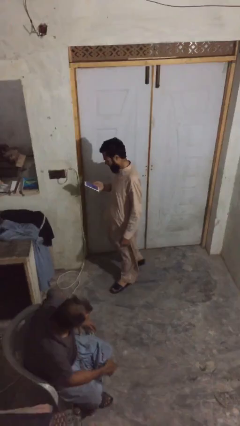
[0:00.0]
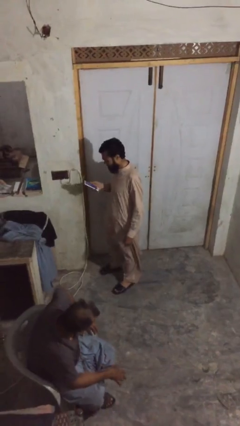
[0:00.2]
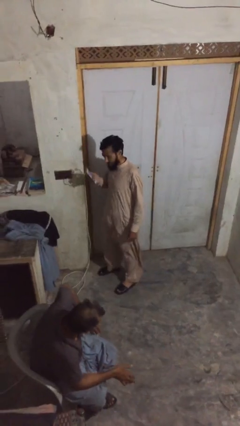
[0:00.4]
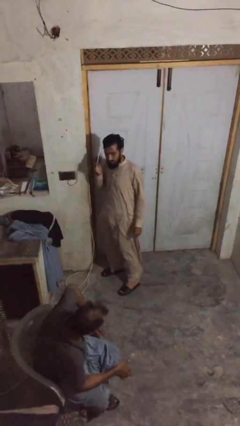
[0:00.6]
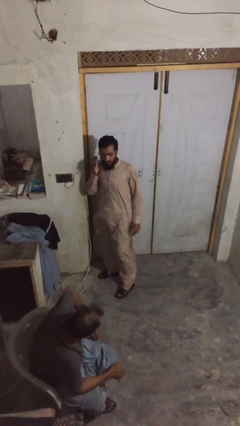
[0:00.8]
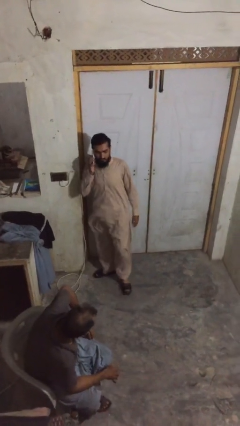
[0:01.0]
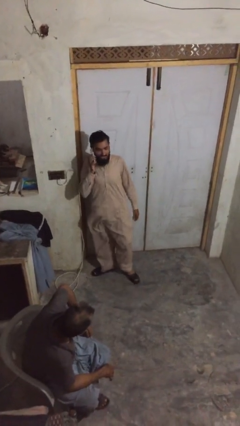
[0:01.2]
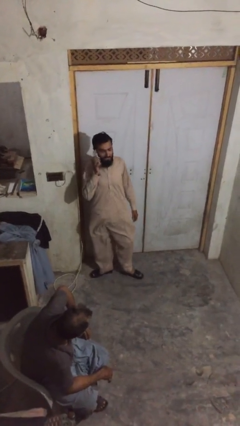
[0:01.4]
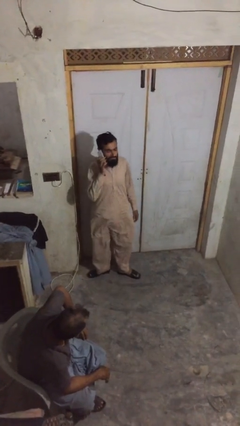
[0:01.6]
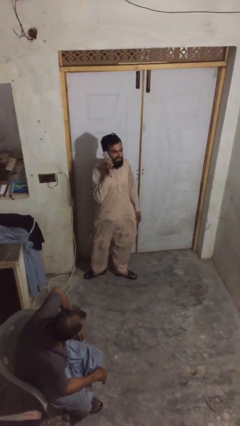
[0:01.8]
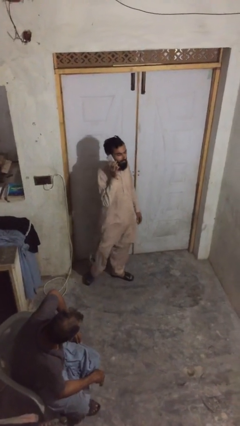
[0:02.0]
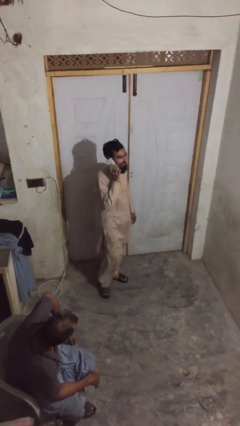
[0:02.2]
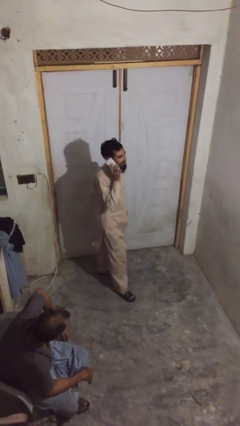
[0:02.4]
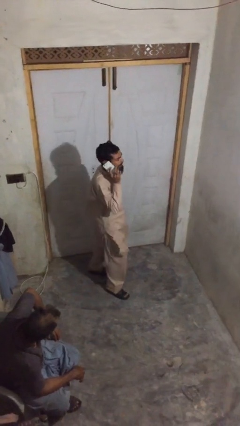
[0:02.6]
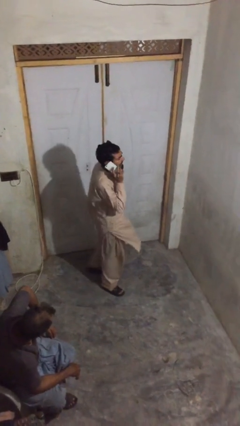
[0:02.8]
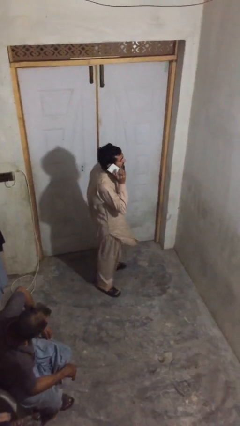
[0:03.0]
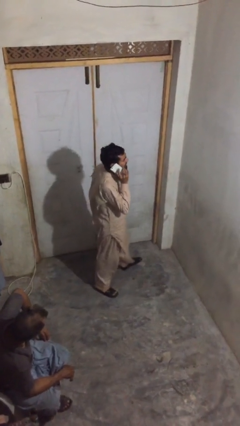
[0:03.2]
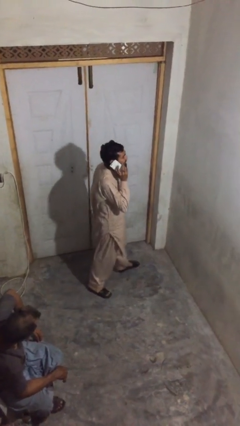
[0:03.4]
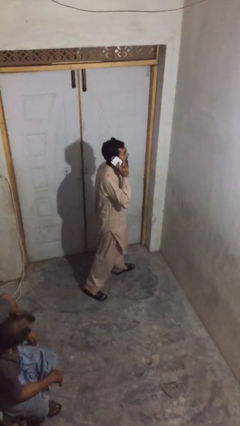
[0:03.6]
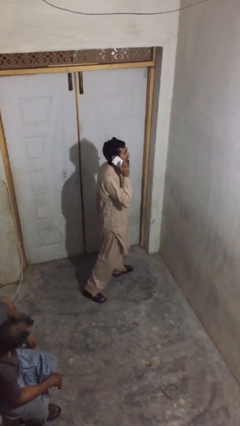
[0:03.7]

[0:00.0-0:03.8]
person talks on phone

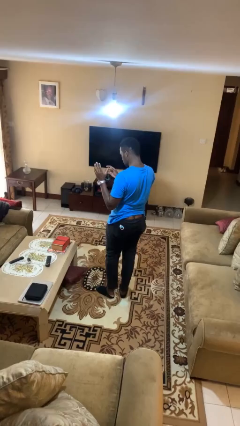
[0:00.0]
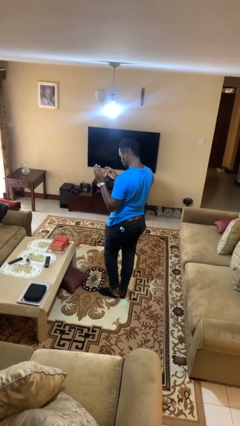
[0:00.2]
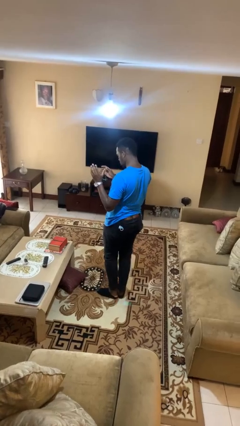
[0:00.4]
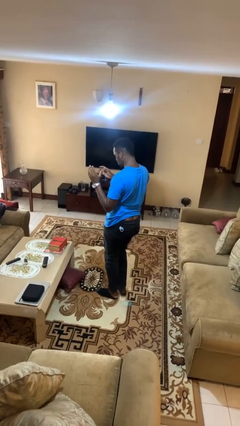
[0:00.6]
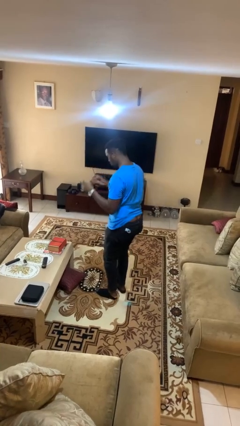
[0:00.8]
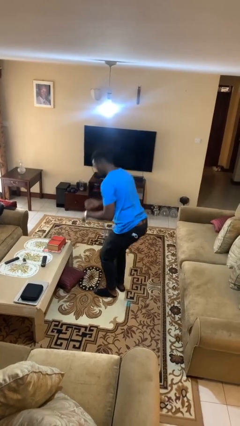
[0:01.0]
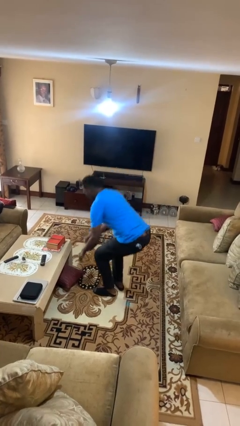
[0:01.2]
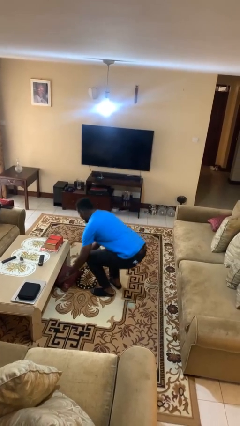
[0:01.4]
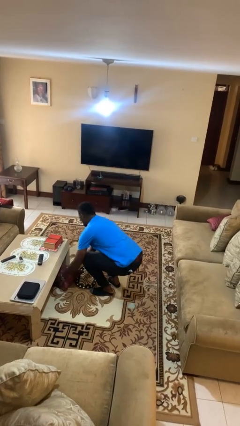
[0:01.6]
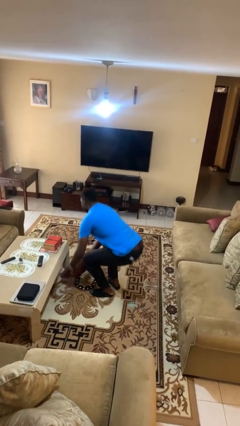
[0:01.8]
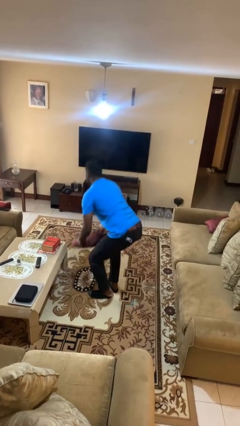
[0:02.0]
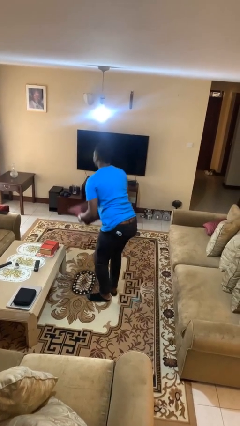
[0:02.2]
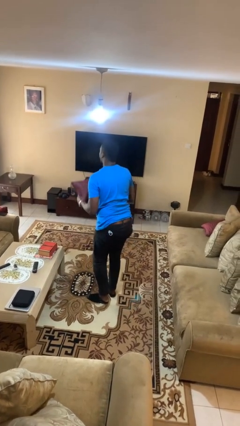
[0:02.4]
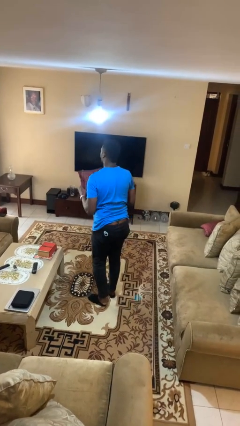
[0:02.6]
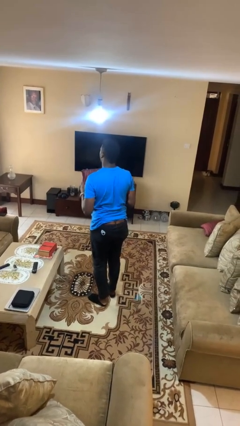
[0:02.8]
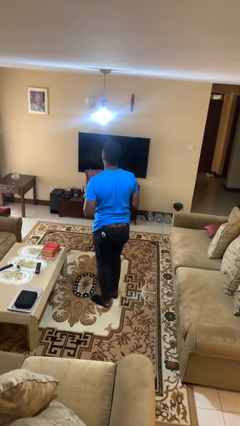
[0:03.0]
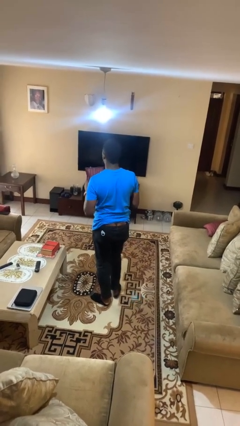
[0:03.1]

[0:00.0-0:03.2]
person picks up object from floor

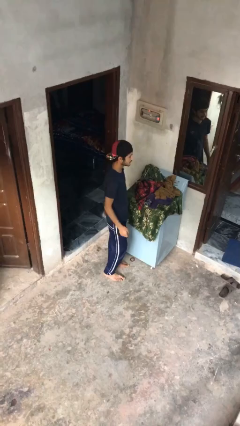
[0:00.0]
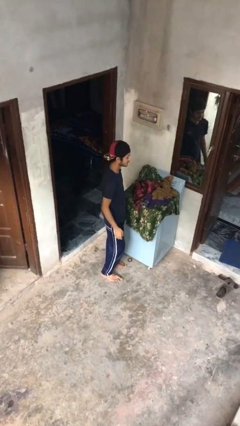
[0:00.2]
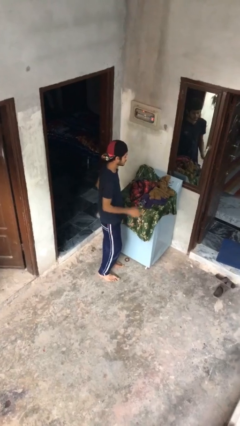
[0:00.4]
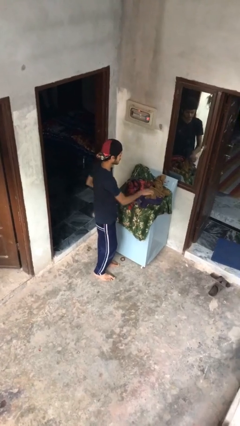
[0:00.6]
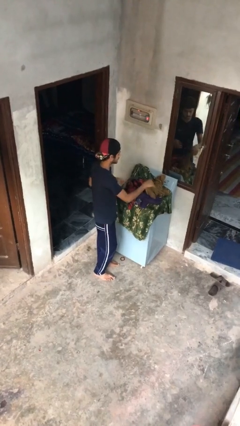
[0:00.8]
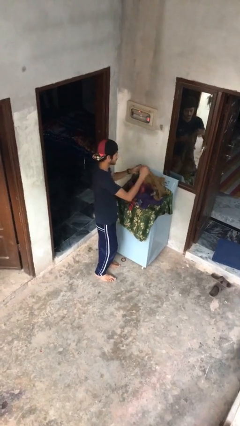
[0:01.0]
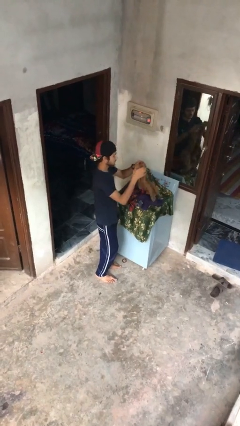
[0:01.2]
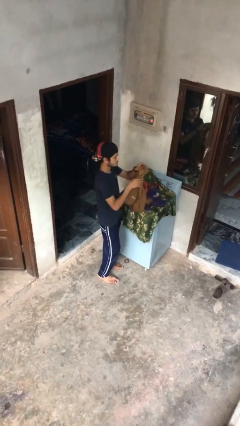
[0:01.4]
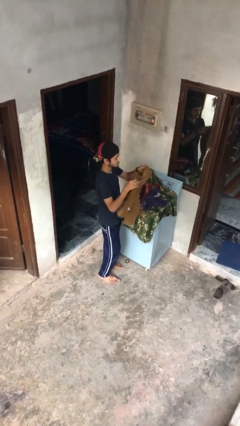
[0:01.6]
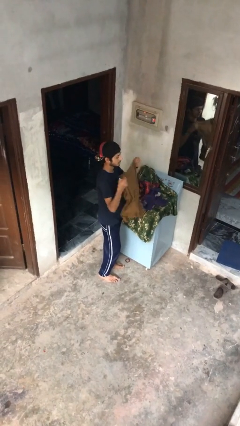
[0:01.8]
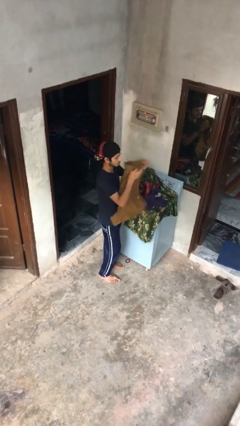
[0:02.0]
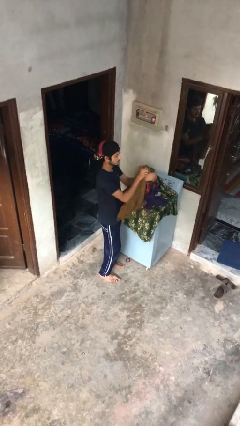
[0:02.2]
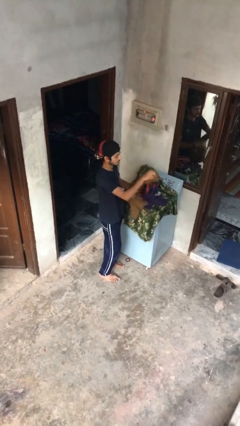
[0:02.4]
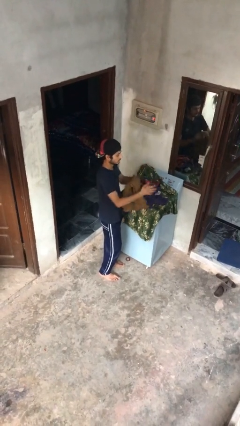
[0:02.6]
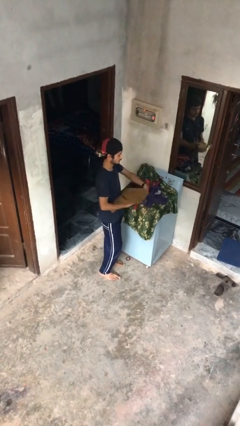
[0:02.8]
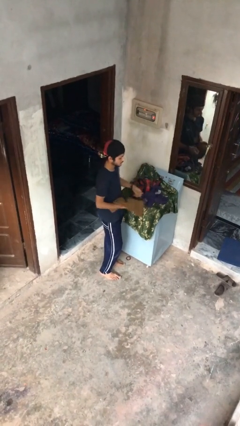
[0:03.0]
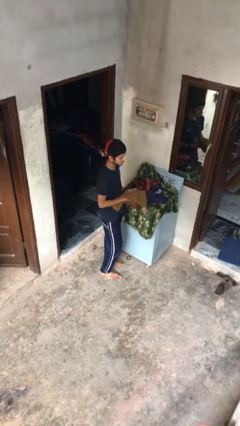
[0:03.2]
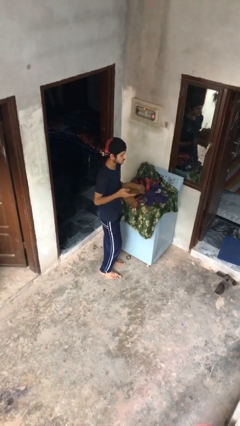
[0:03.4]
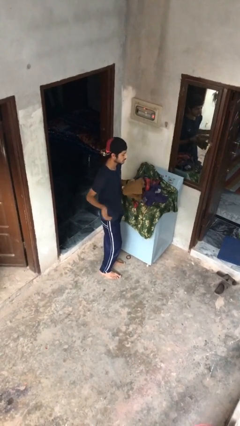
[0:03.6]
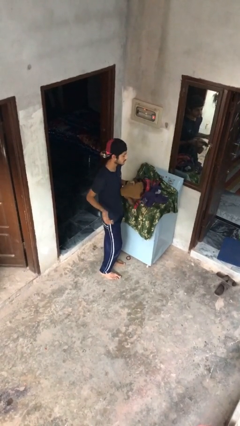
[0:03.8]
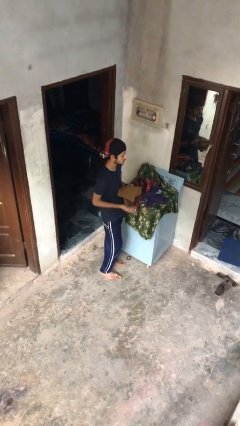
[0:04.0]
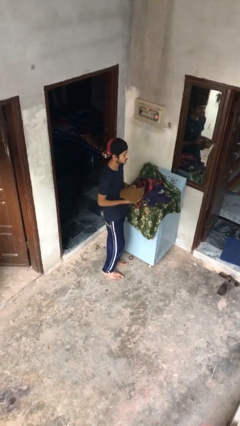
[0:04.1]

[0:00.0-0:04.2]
person folds shirt

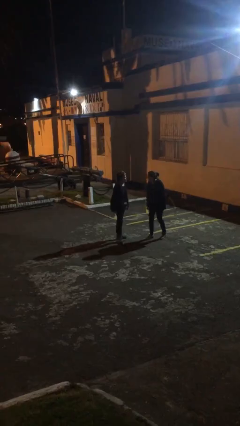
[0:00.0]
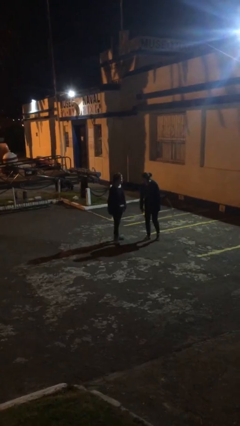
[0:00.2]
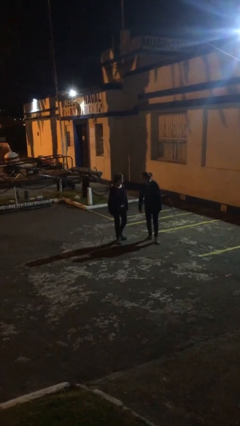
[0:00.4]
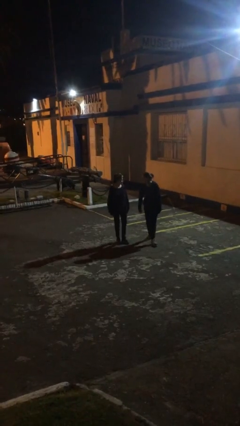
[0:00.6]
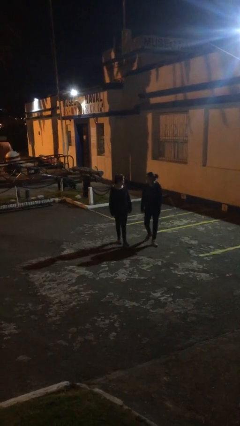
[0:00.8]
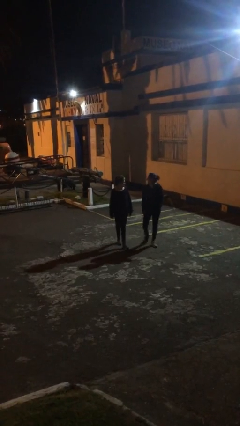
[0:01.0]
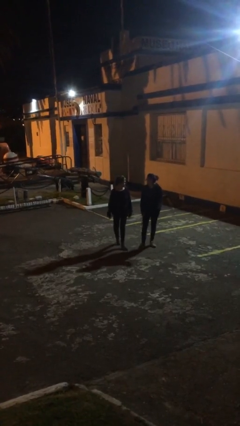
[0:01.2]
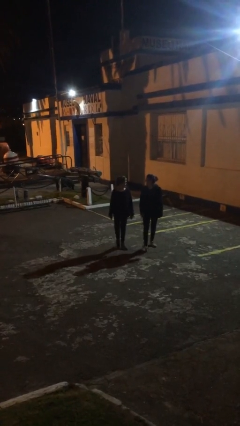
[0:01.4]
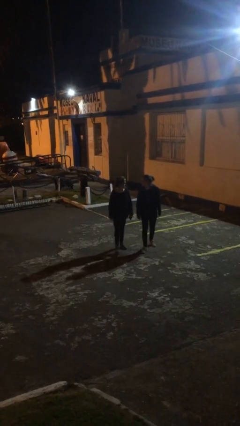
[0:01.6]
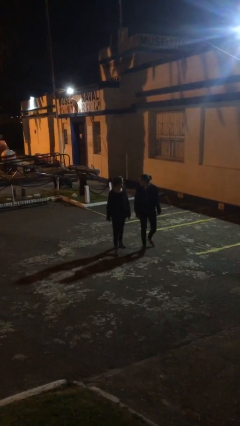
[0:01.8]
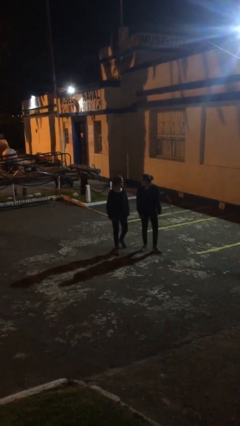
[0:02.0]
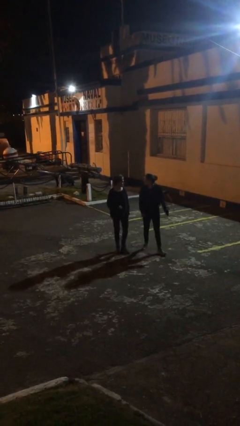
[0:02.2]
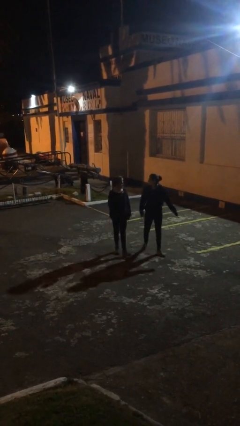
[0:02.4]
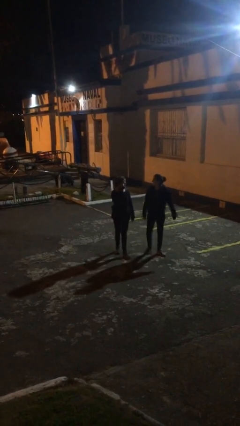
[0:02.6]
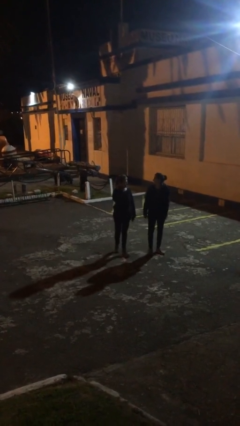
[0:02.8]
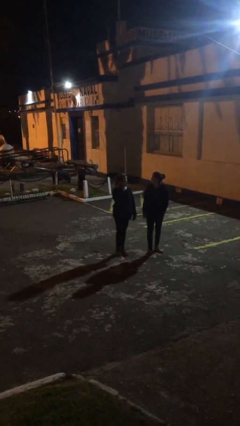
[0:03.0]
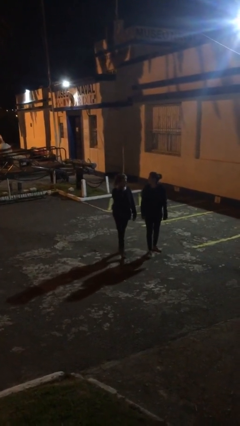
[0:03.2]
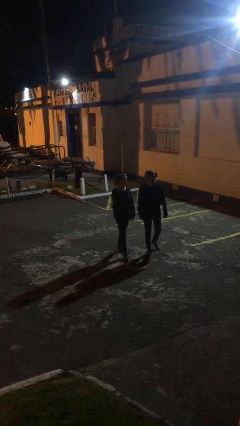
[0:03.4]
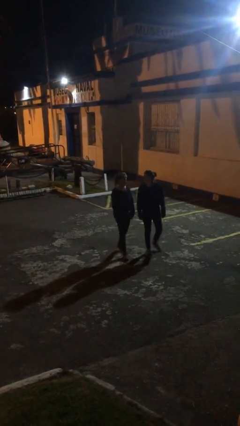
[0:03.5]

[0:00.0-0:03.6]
person talks to person

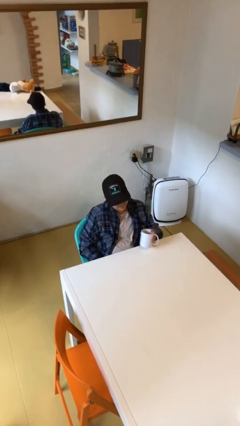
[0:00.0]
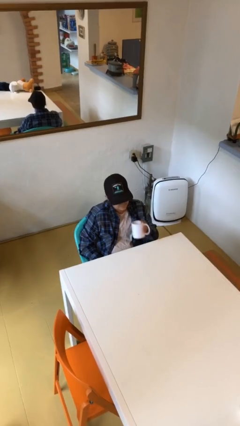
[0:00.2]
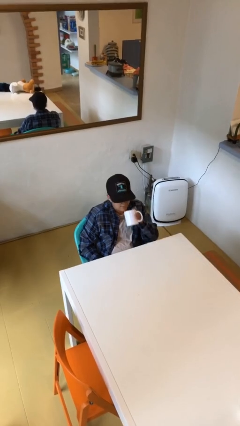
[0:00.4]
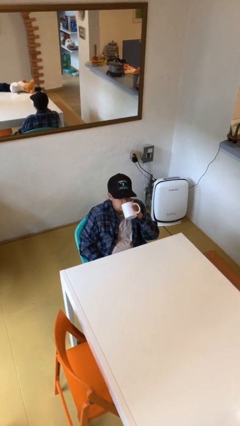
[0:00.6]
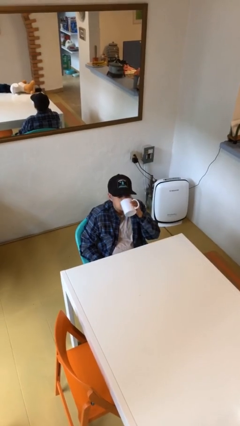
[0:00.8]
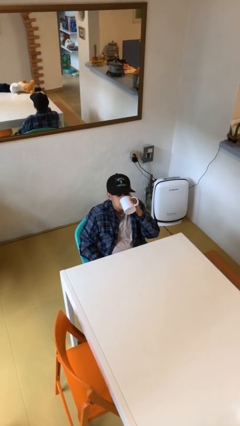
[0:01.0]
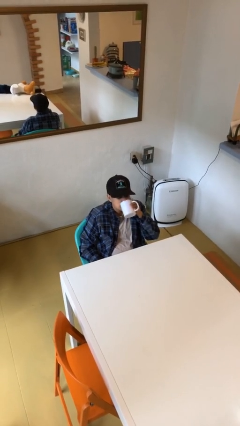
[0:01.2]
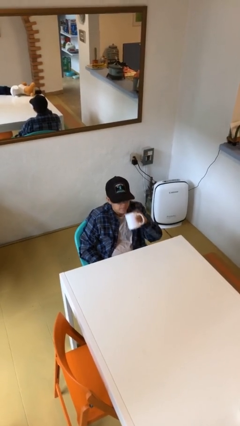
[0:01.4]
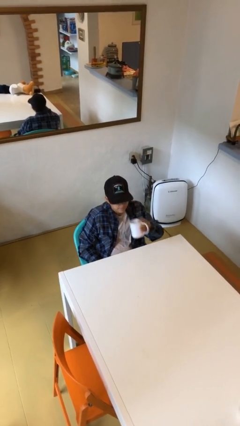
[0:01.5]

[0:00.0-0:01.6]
person drinks from mug

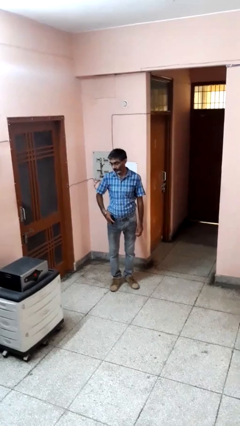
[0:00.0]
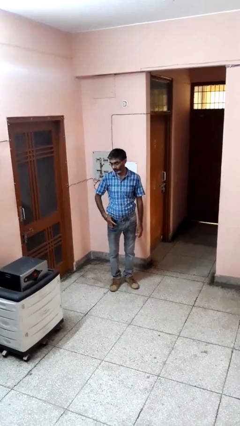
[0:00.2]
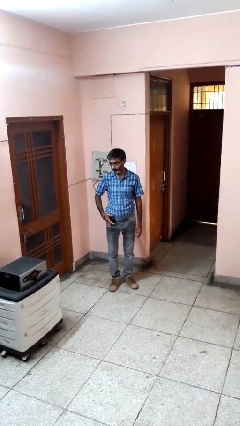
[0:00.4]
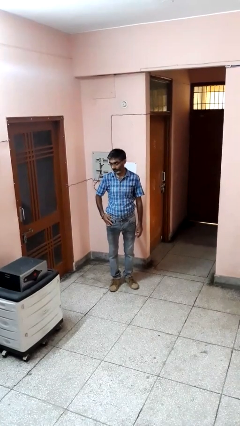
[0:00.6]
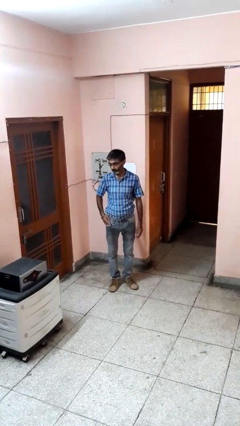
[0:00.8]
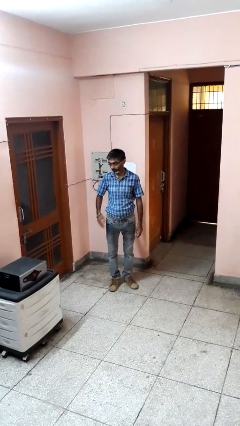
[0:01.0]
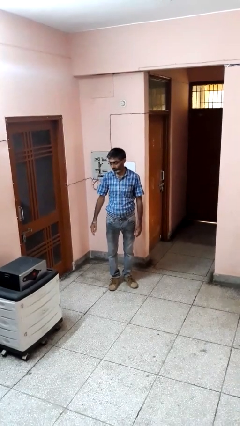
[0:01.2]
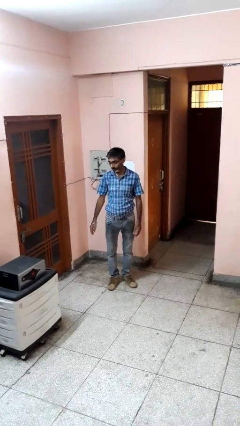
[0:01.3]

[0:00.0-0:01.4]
person puts phone into pocket
